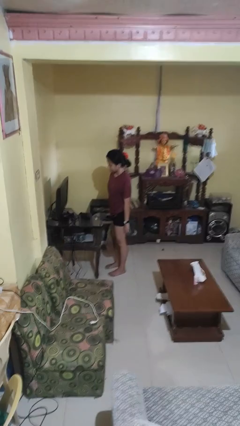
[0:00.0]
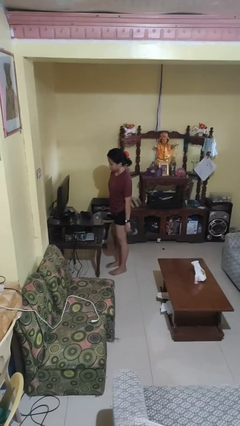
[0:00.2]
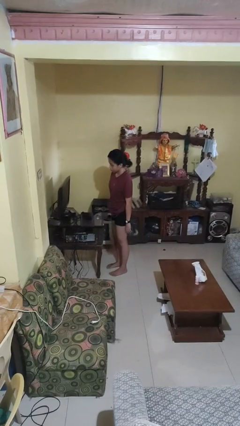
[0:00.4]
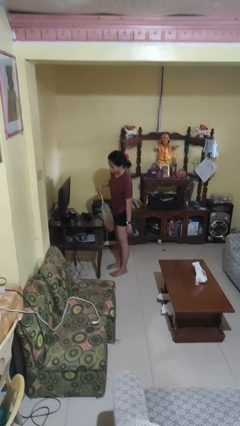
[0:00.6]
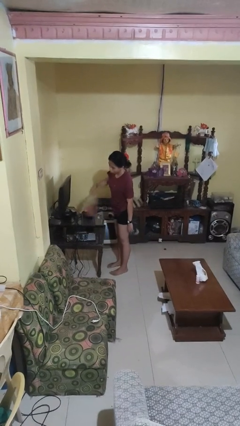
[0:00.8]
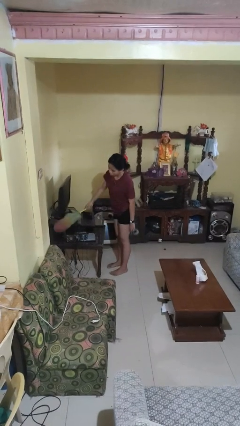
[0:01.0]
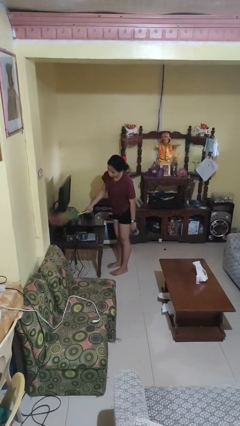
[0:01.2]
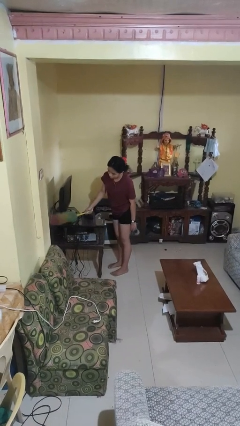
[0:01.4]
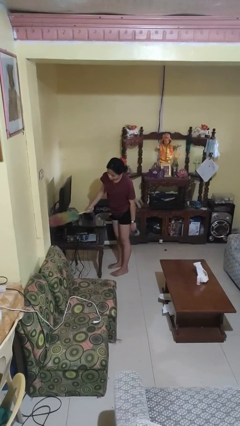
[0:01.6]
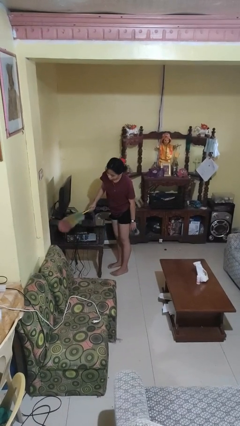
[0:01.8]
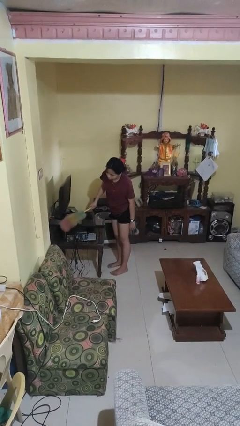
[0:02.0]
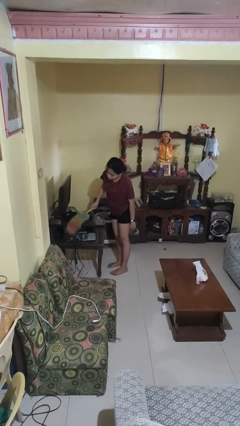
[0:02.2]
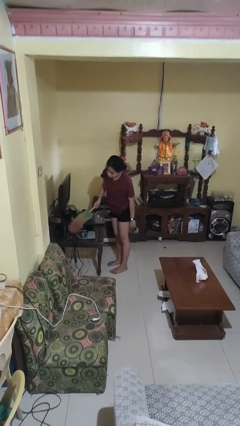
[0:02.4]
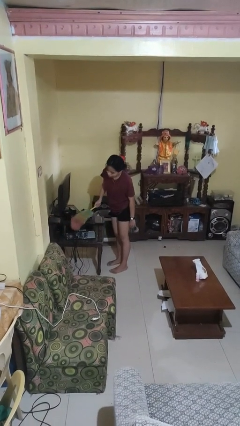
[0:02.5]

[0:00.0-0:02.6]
person dusts furniture

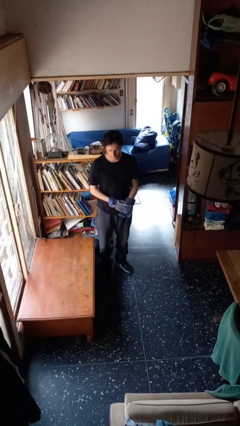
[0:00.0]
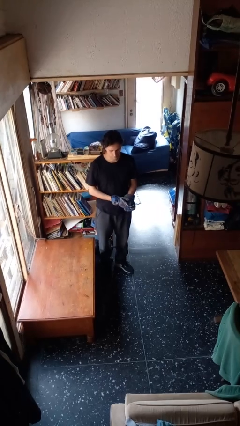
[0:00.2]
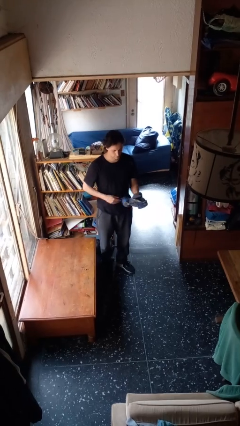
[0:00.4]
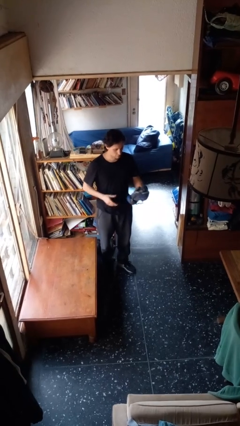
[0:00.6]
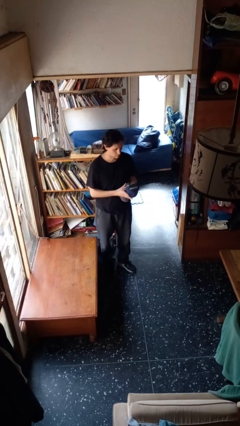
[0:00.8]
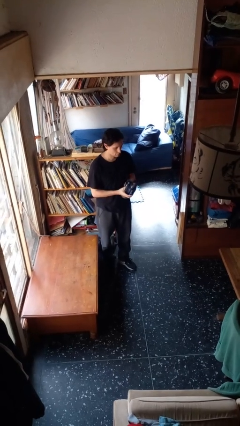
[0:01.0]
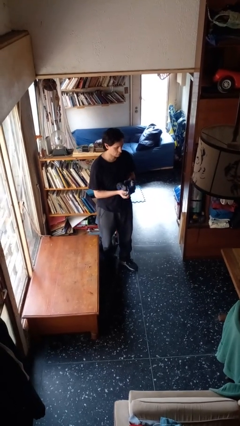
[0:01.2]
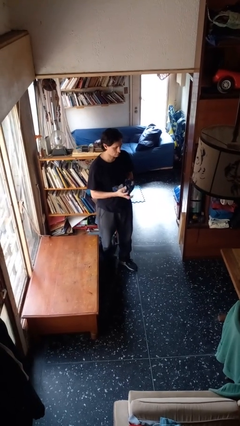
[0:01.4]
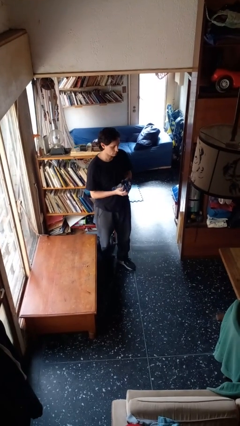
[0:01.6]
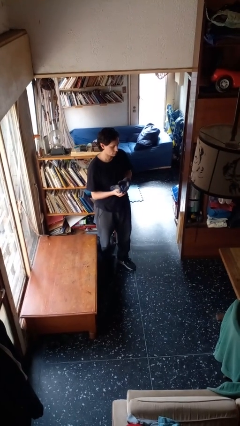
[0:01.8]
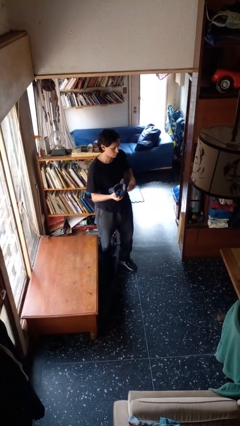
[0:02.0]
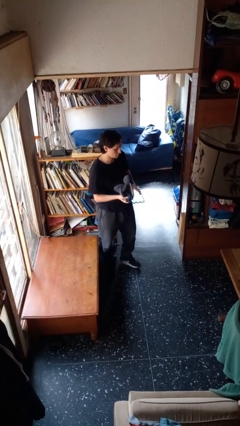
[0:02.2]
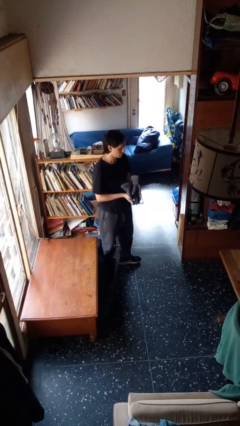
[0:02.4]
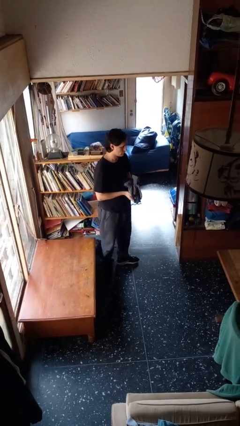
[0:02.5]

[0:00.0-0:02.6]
person takes off gloves

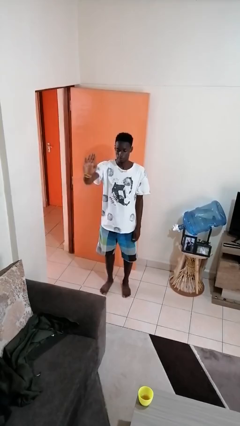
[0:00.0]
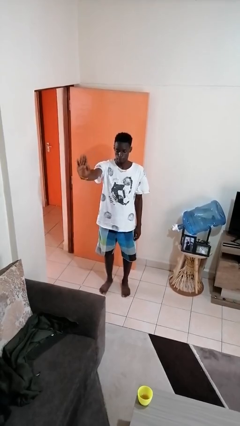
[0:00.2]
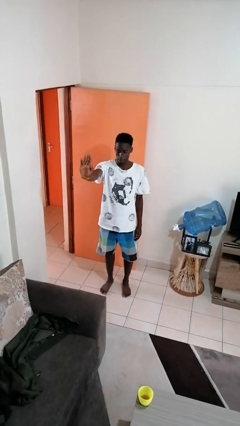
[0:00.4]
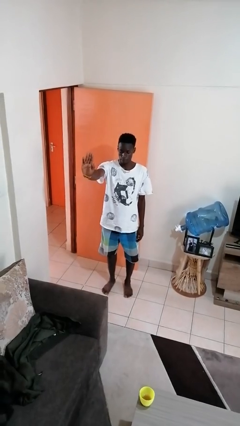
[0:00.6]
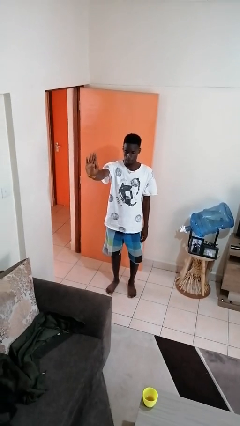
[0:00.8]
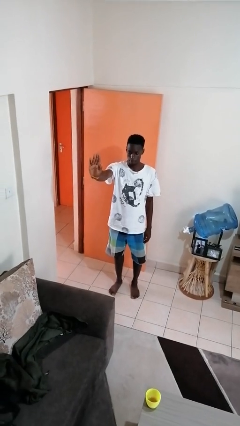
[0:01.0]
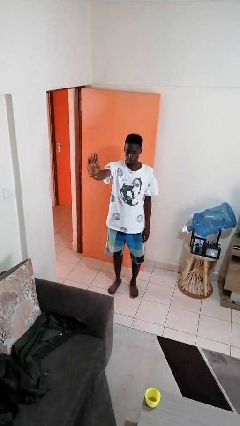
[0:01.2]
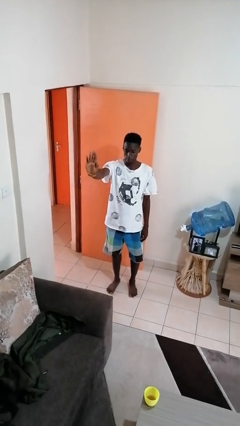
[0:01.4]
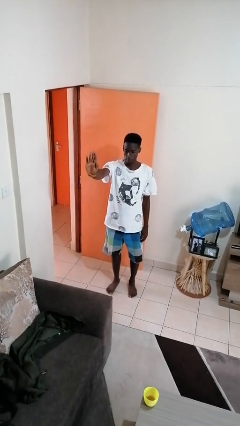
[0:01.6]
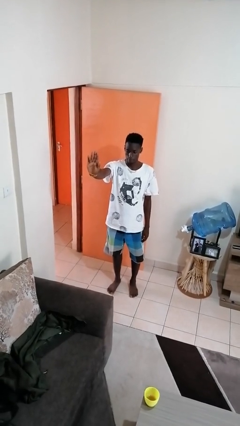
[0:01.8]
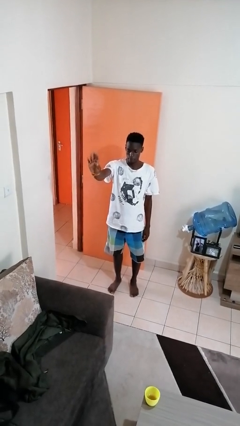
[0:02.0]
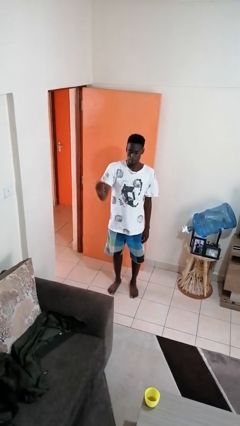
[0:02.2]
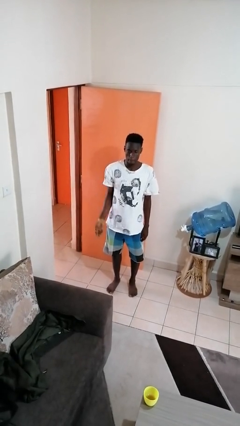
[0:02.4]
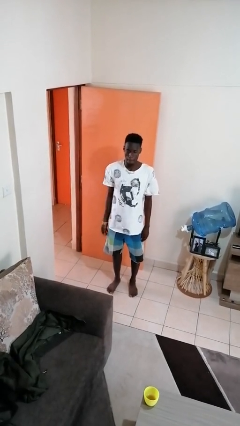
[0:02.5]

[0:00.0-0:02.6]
person gestures stop

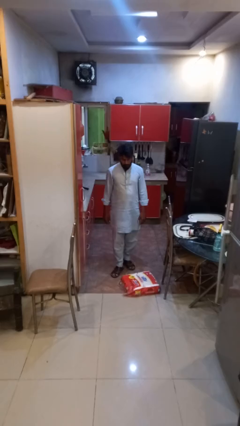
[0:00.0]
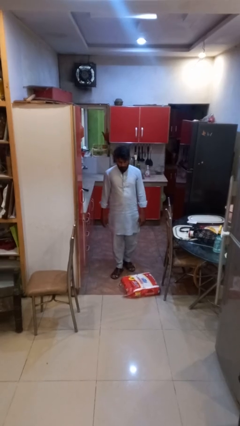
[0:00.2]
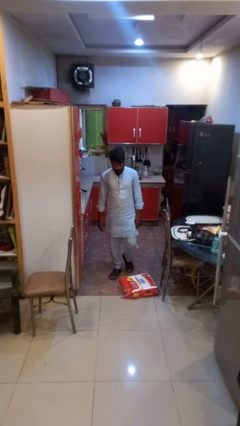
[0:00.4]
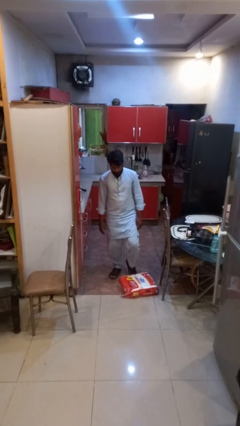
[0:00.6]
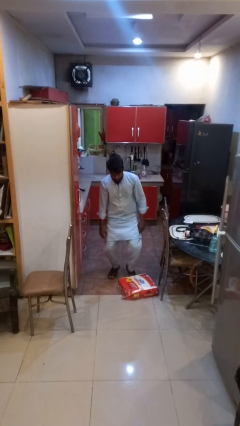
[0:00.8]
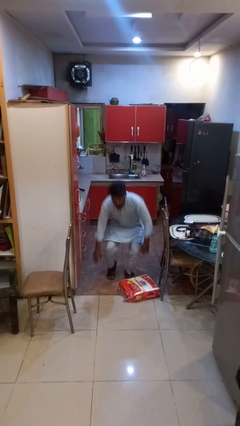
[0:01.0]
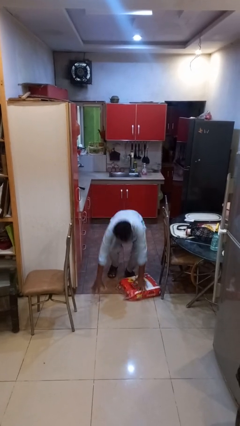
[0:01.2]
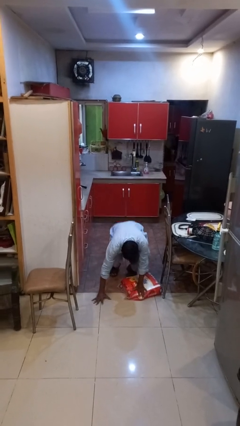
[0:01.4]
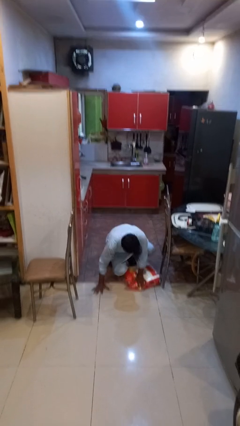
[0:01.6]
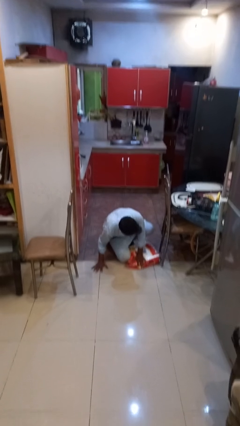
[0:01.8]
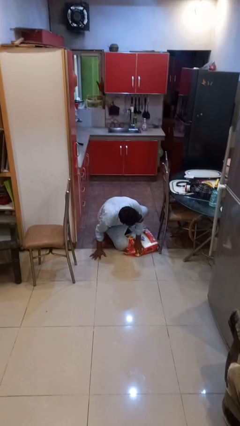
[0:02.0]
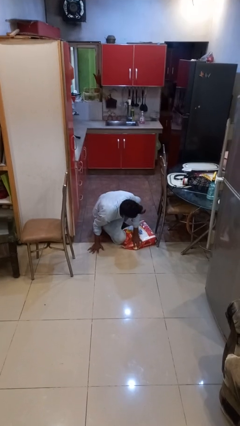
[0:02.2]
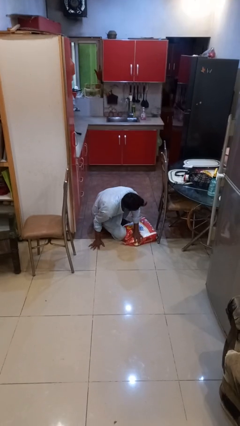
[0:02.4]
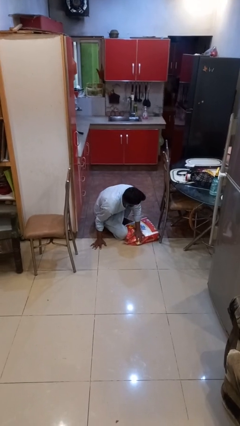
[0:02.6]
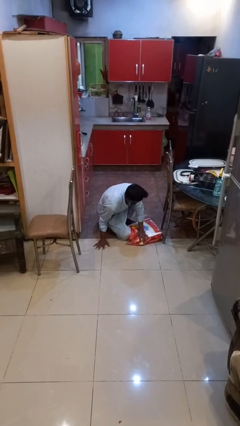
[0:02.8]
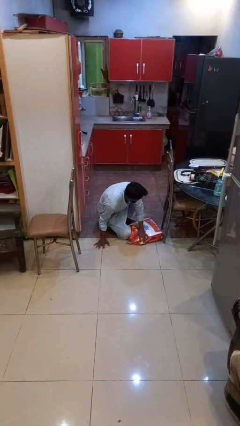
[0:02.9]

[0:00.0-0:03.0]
person trips on object on floor

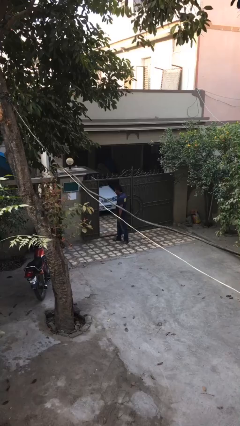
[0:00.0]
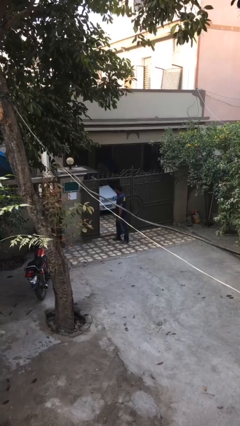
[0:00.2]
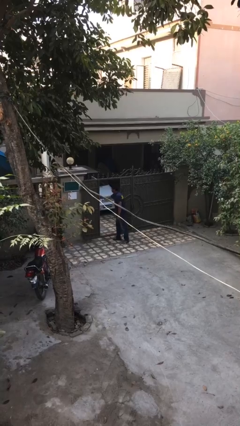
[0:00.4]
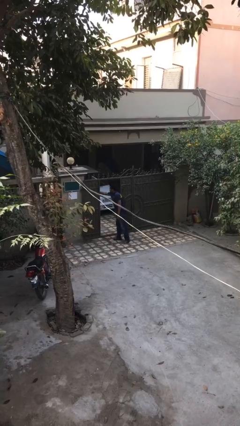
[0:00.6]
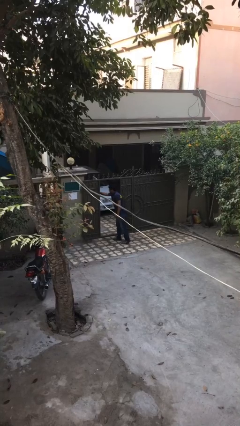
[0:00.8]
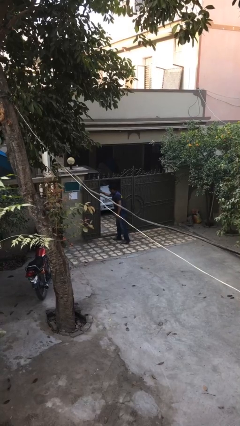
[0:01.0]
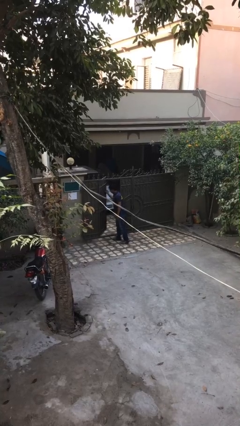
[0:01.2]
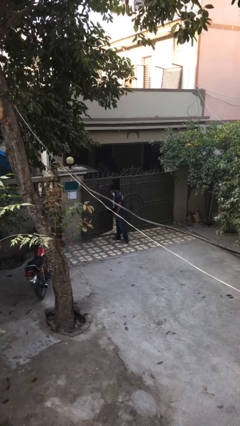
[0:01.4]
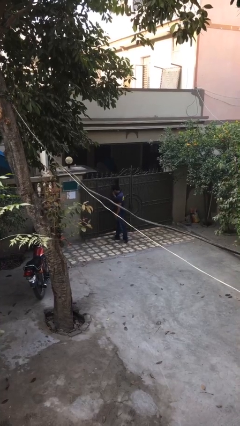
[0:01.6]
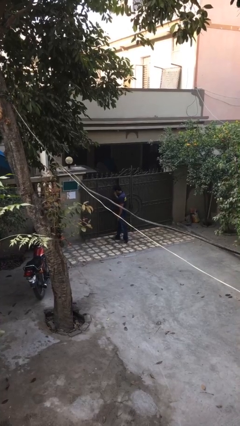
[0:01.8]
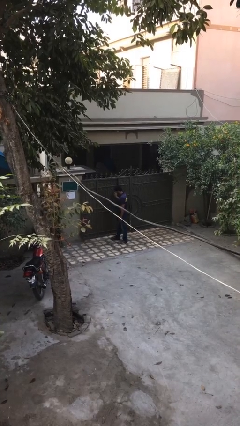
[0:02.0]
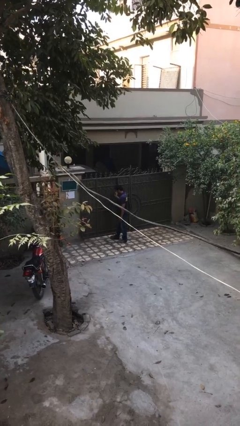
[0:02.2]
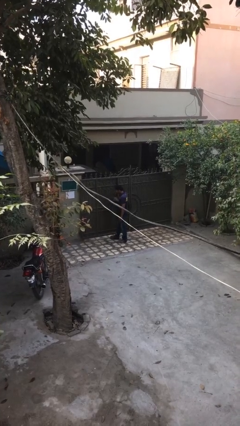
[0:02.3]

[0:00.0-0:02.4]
person closes facility door

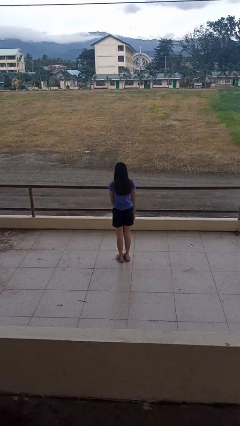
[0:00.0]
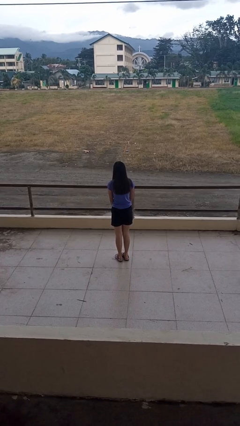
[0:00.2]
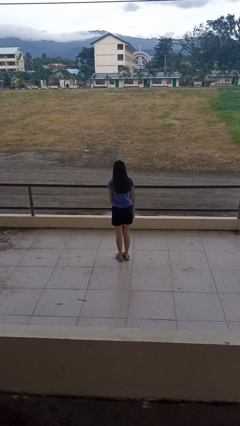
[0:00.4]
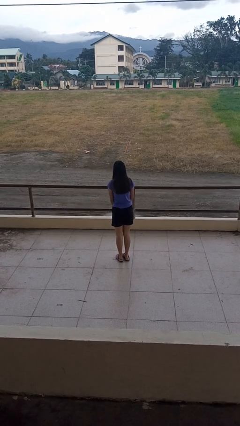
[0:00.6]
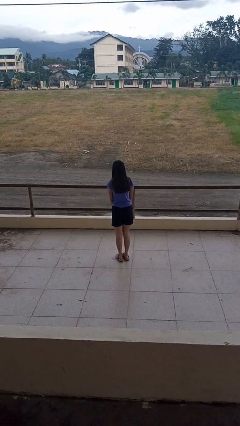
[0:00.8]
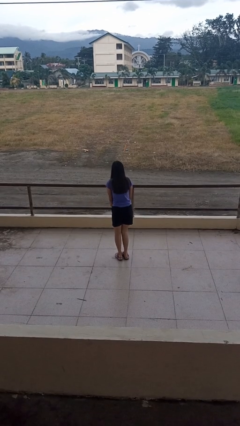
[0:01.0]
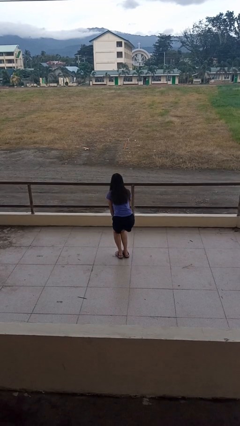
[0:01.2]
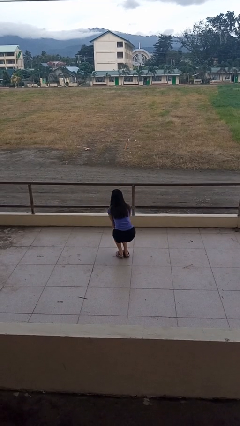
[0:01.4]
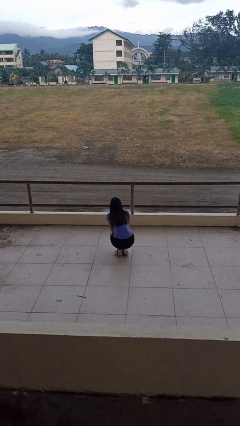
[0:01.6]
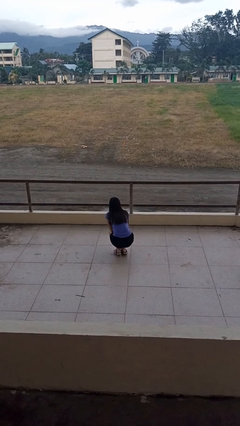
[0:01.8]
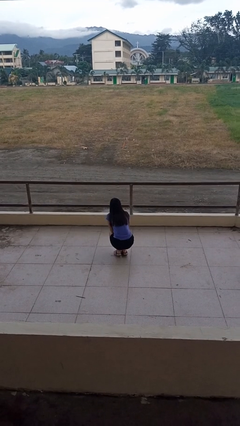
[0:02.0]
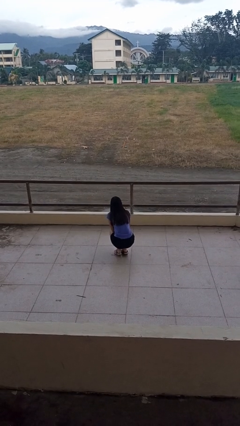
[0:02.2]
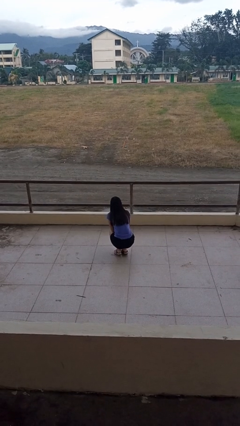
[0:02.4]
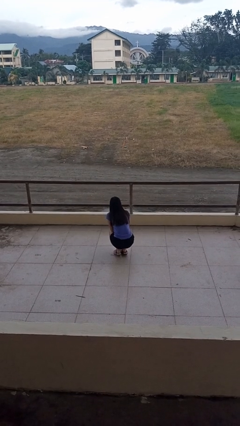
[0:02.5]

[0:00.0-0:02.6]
person squats

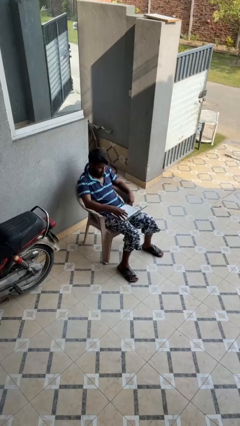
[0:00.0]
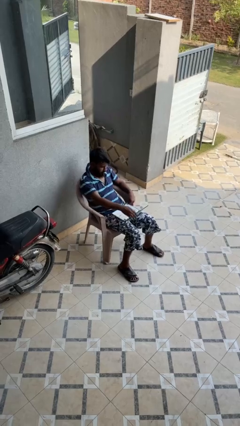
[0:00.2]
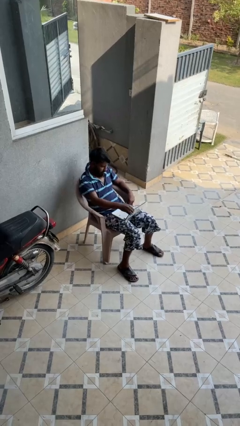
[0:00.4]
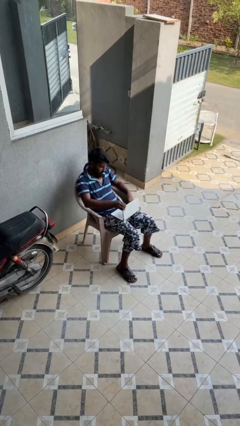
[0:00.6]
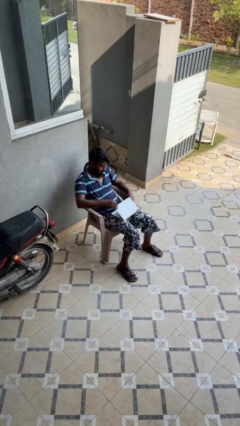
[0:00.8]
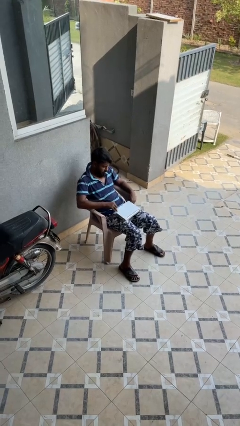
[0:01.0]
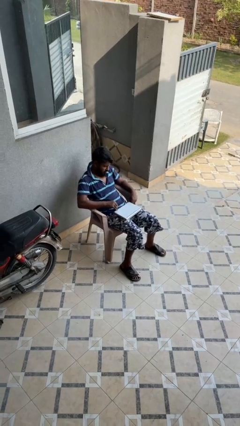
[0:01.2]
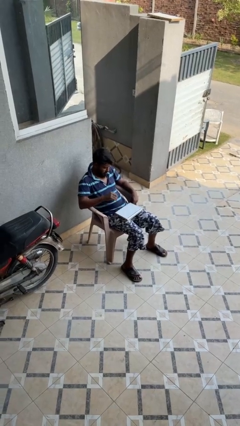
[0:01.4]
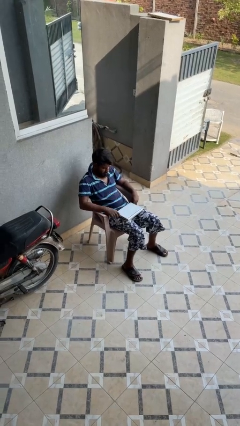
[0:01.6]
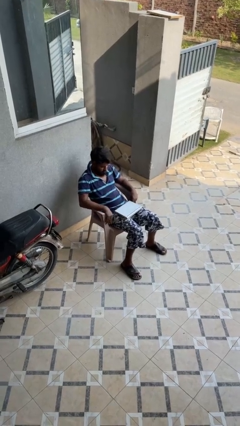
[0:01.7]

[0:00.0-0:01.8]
person closes laptop
